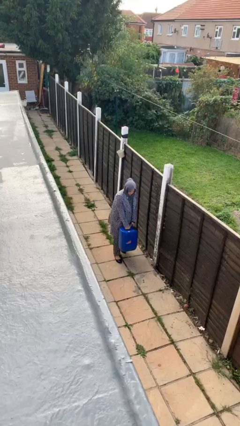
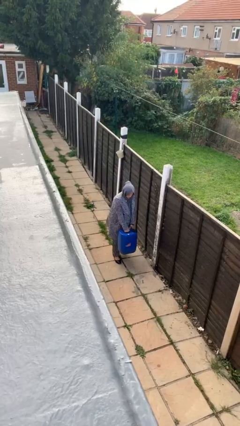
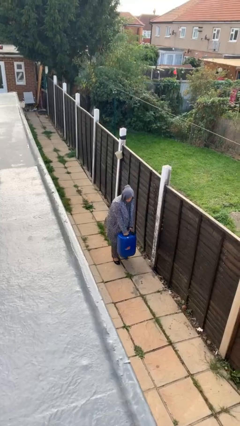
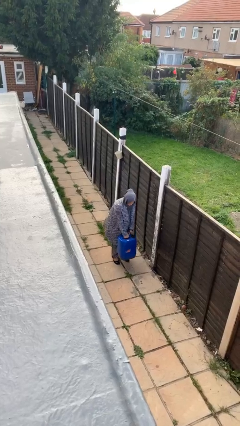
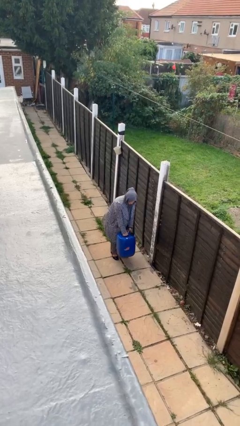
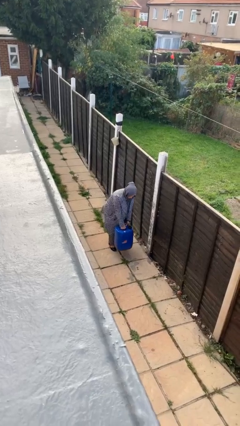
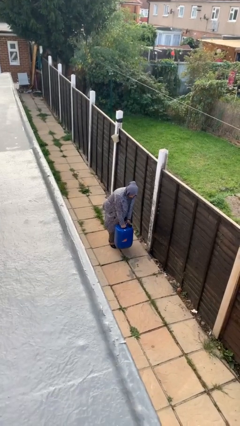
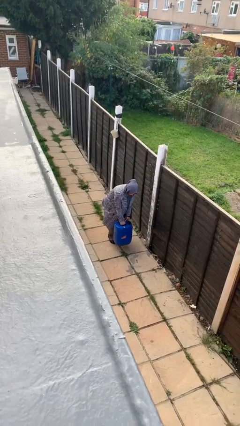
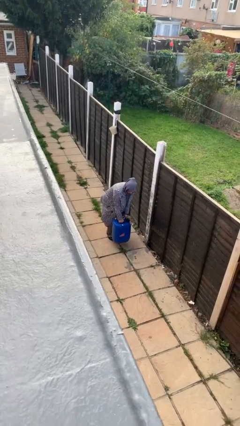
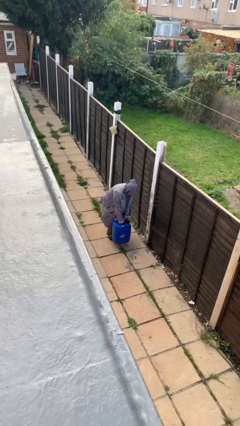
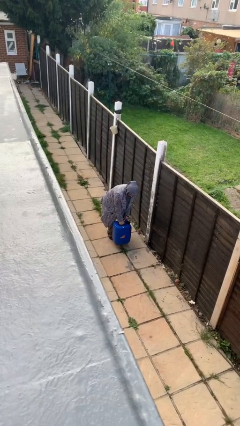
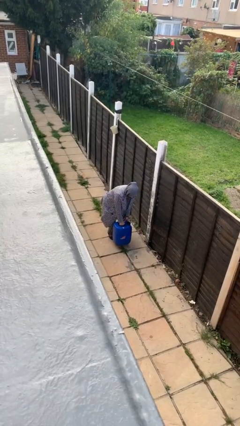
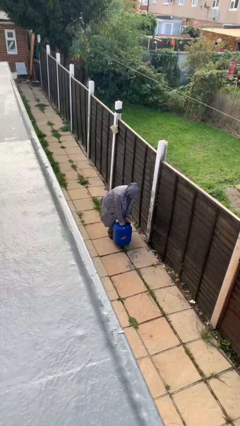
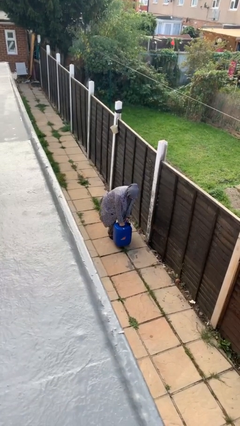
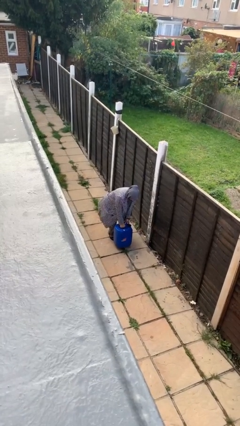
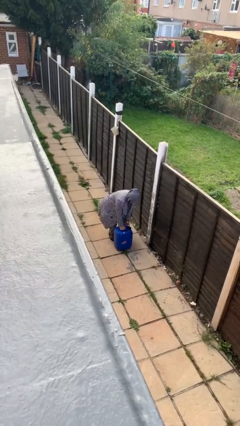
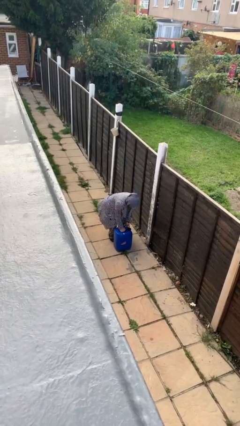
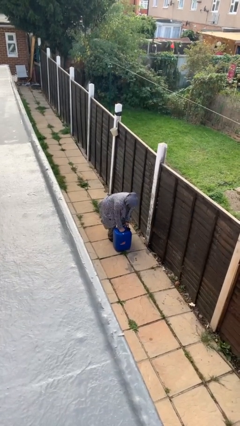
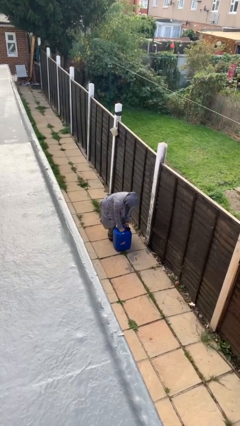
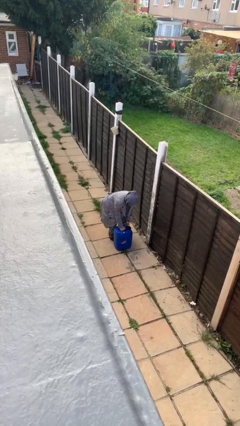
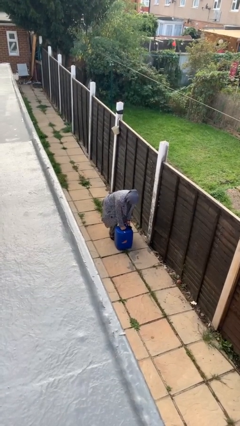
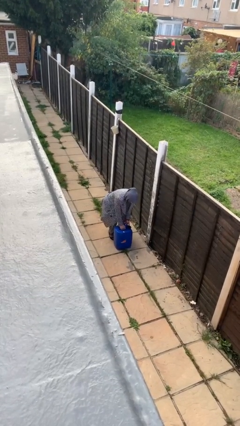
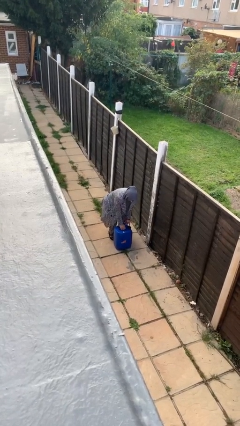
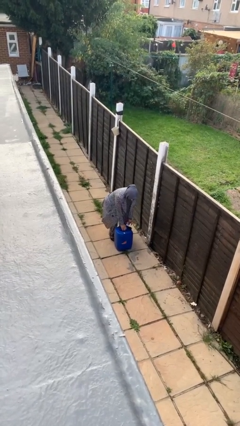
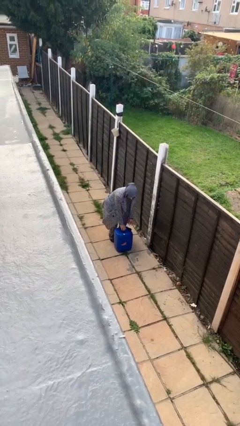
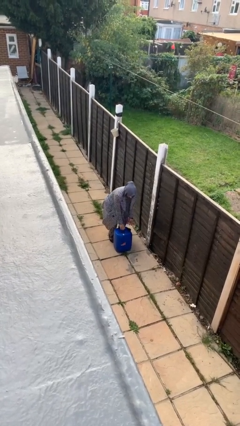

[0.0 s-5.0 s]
person puts down object on floor

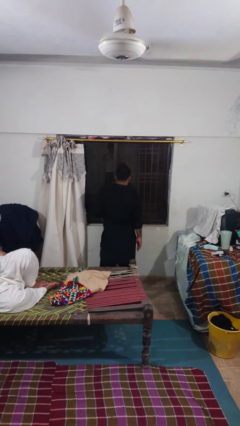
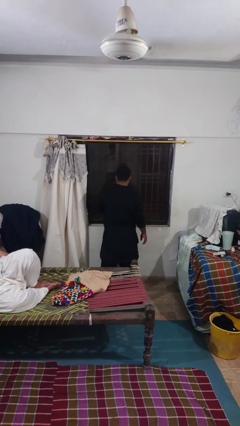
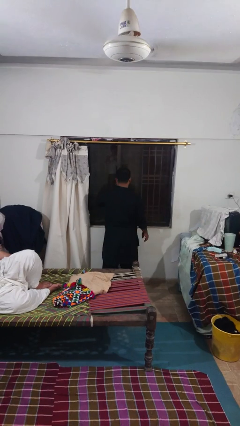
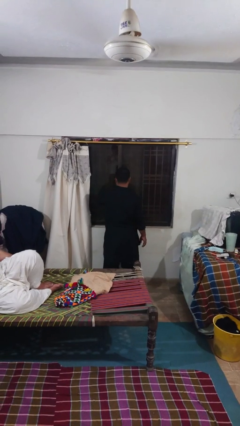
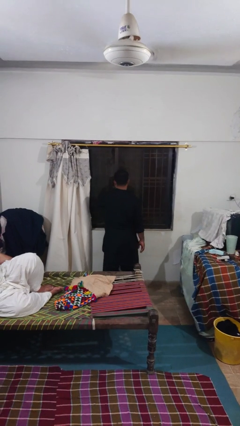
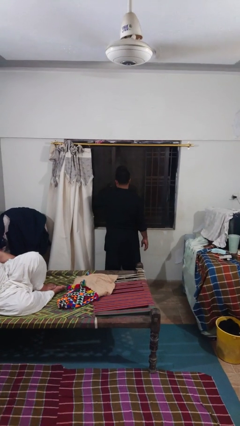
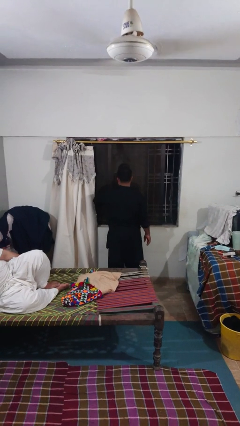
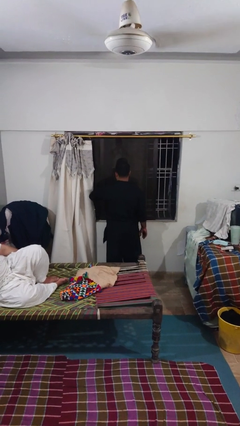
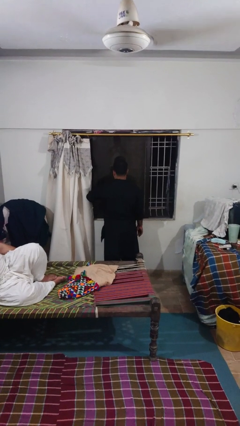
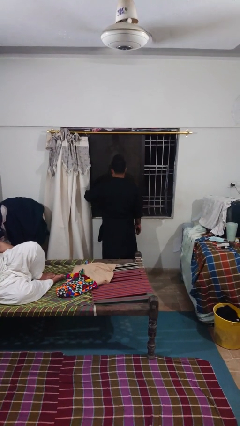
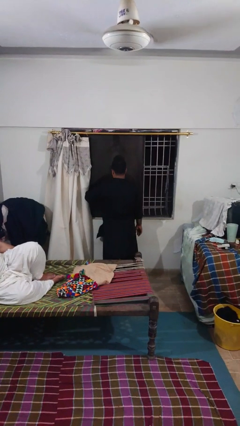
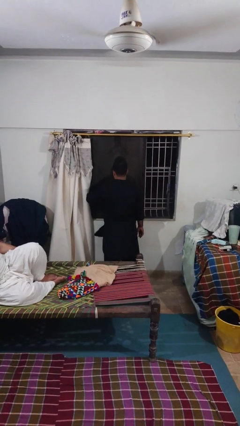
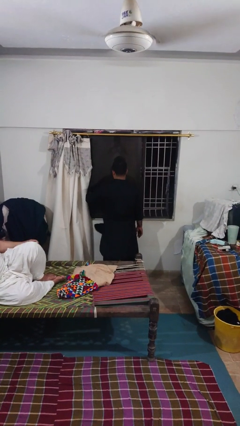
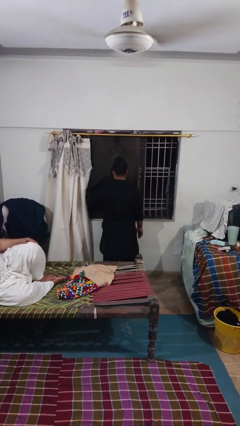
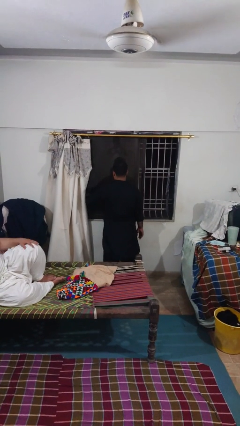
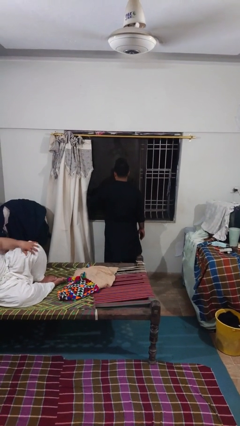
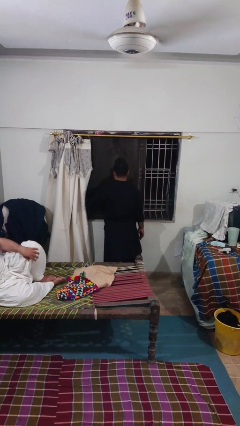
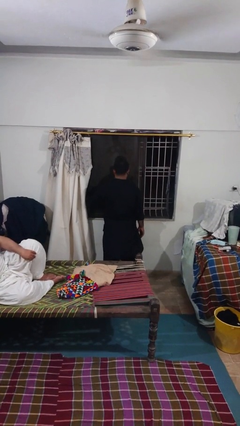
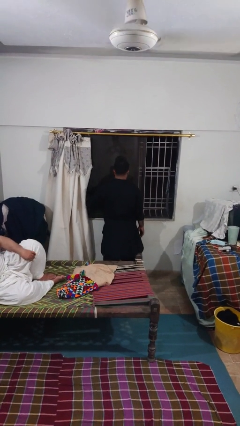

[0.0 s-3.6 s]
person opens sliding door

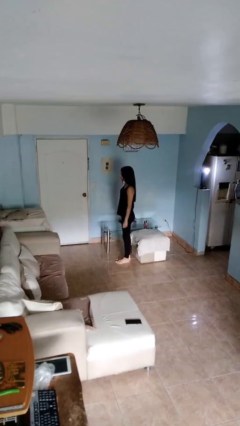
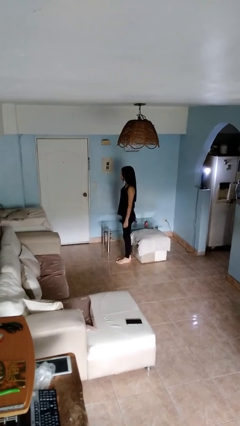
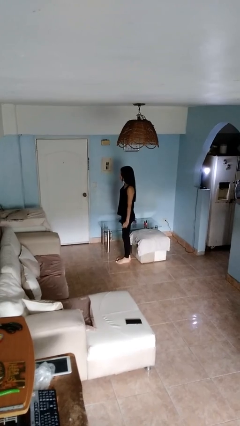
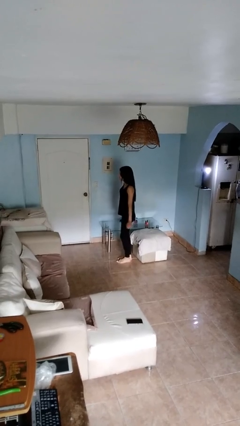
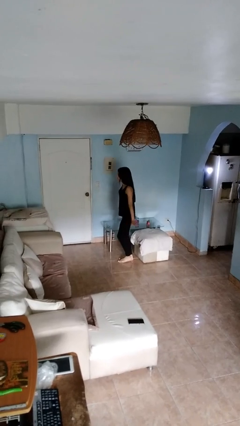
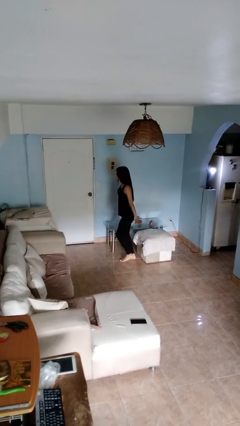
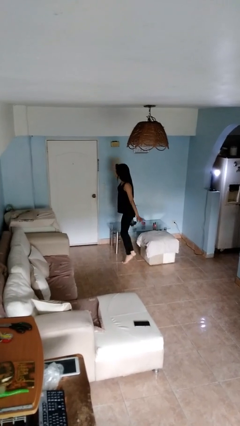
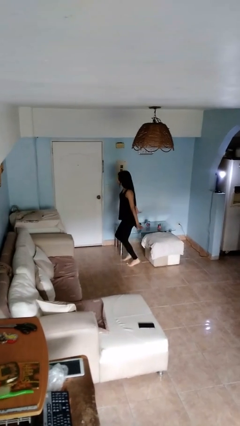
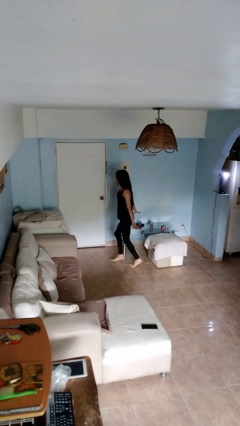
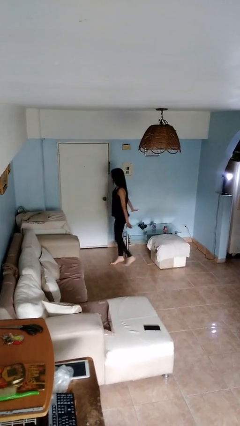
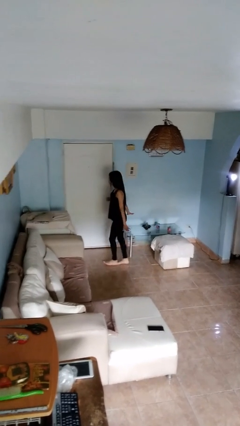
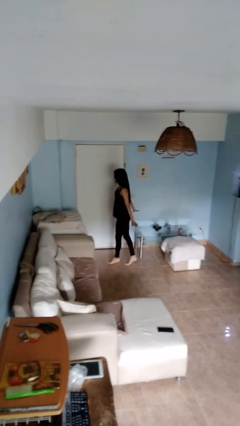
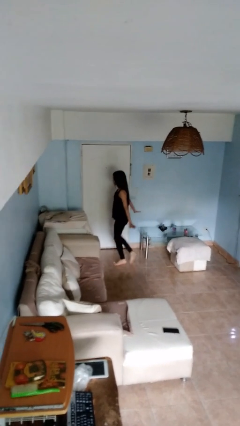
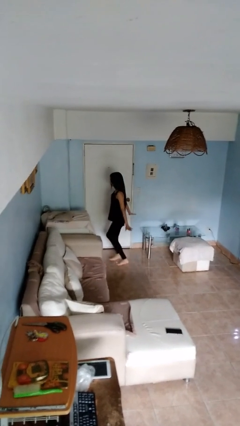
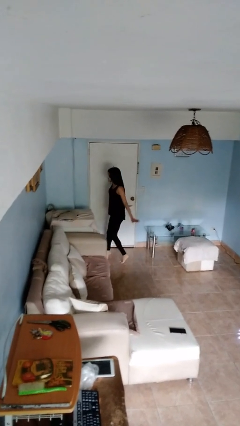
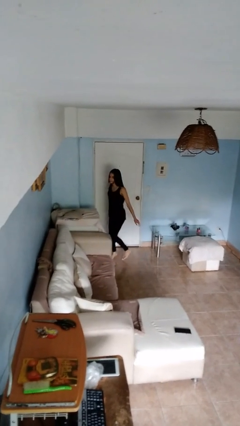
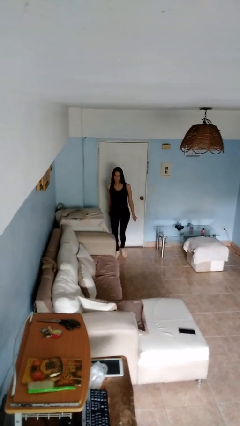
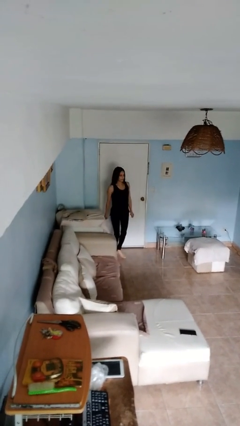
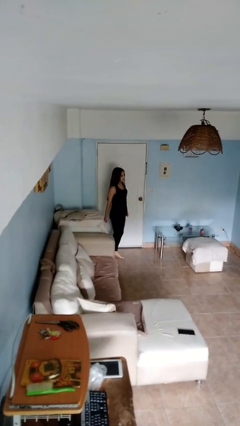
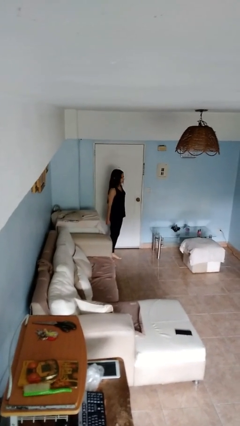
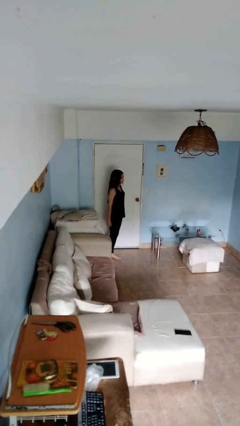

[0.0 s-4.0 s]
person walks tiptoe

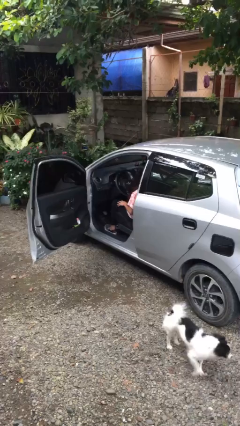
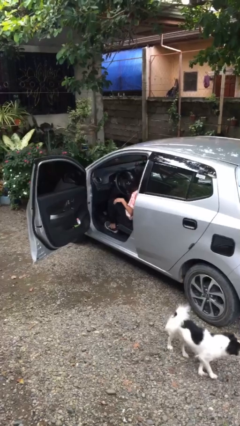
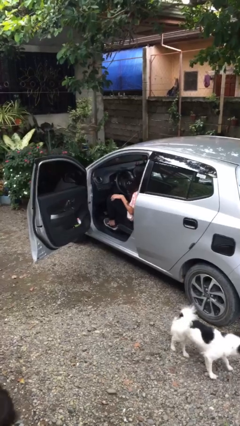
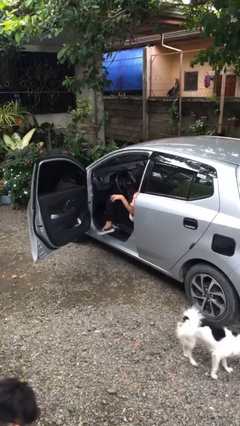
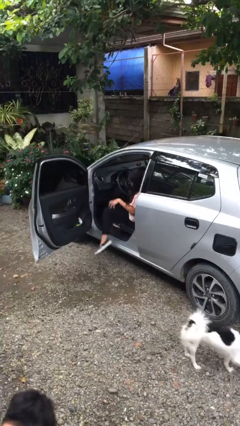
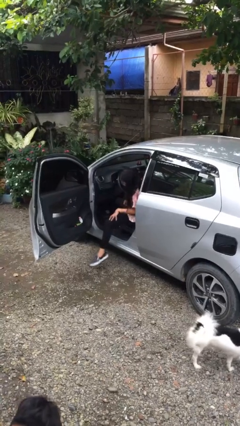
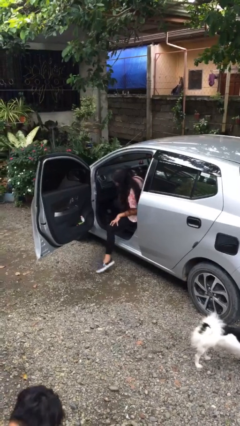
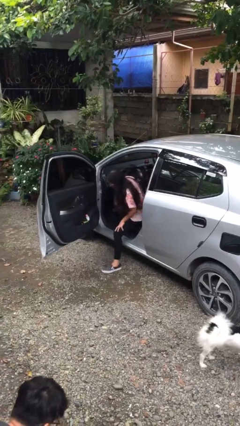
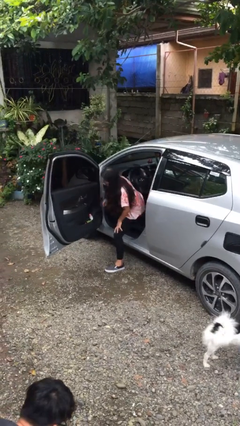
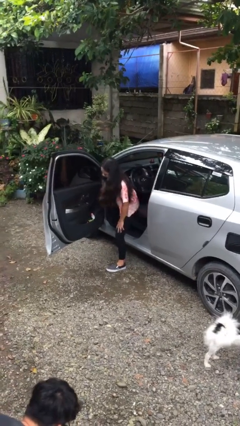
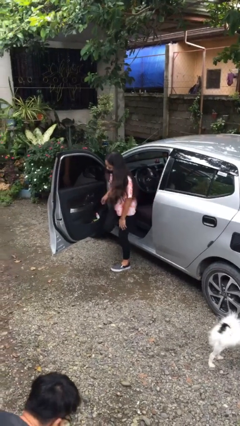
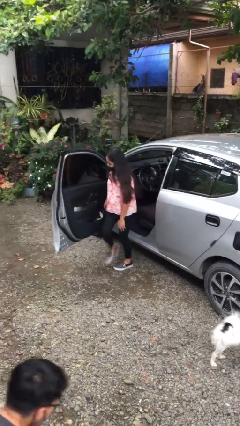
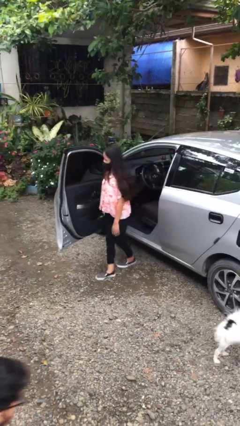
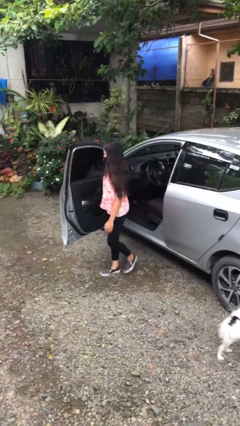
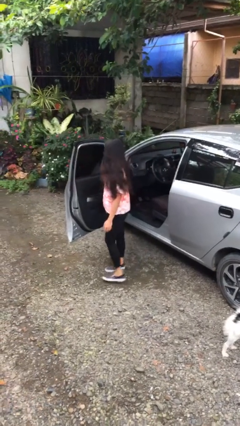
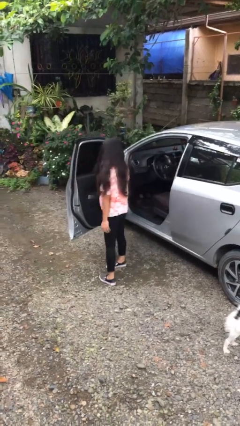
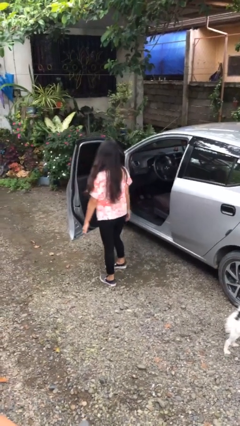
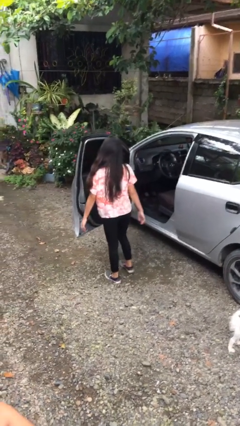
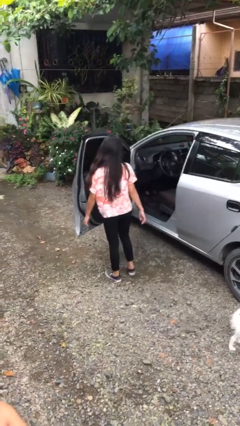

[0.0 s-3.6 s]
person exits car

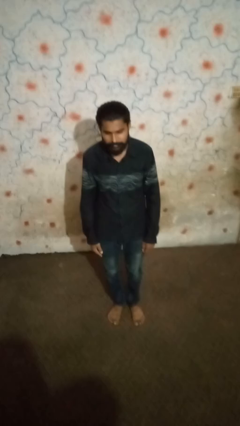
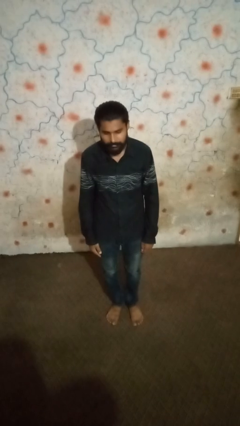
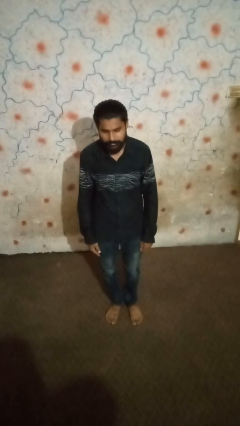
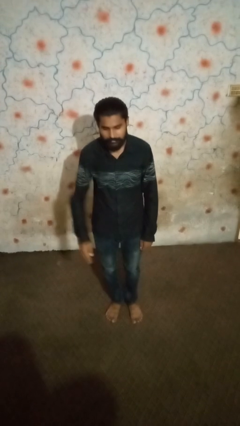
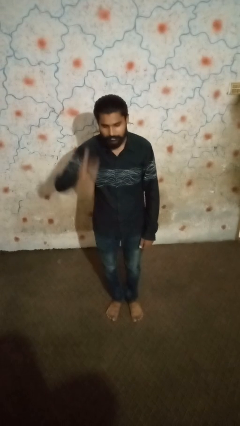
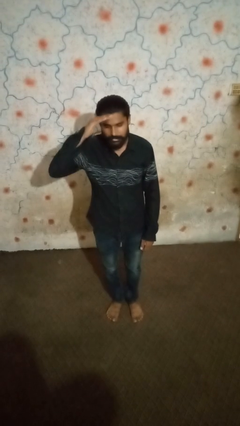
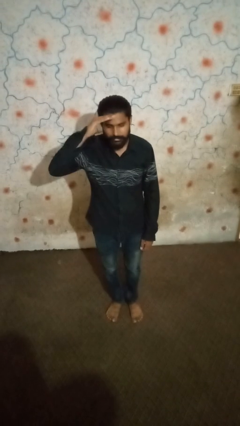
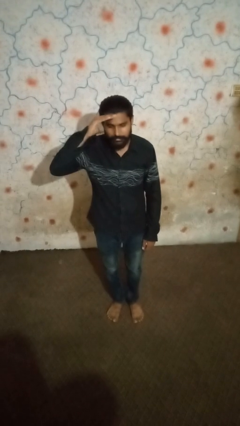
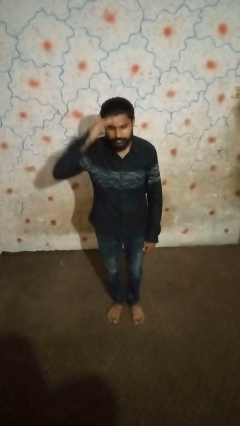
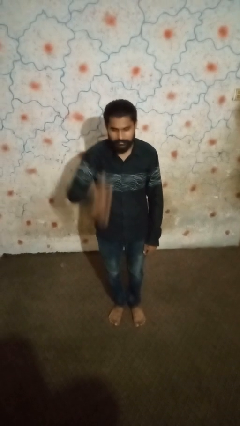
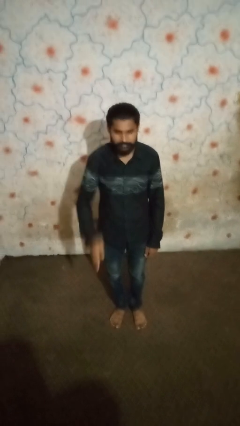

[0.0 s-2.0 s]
person salutes
